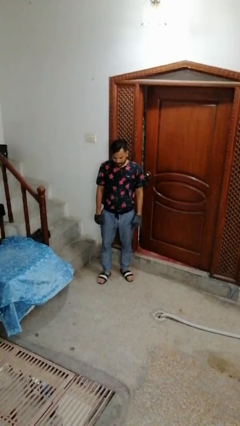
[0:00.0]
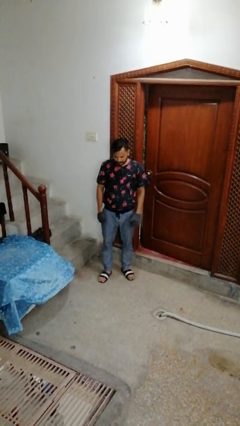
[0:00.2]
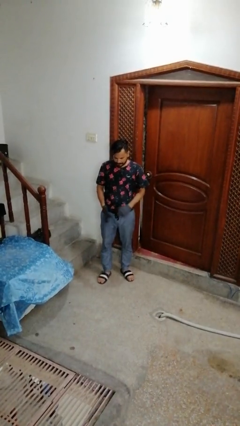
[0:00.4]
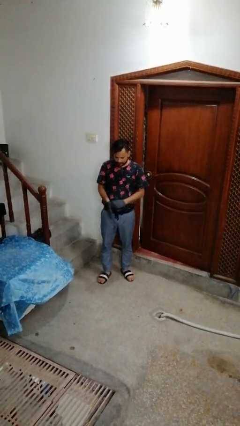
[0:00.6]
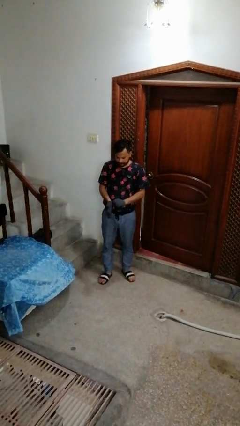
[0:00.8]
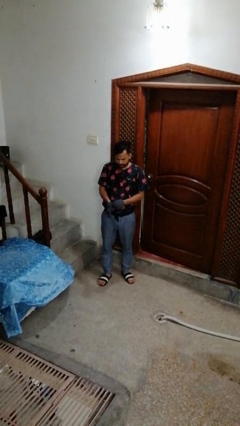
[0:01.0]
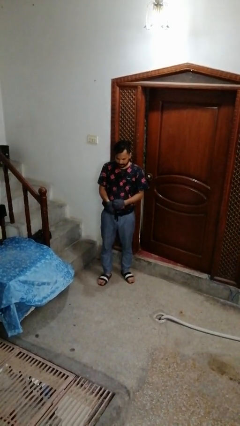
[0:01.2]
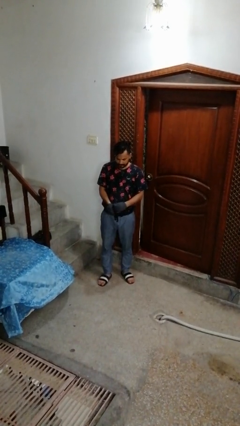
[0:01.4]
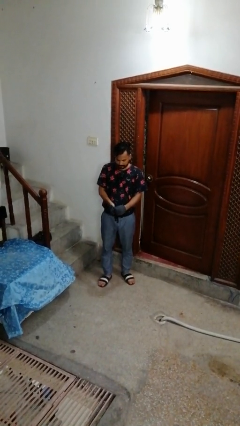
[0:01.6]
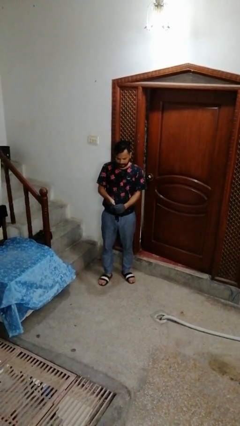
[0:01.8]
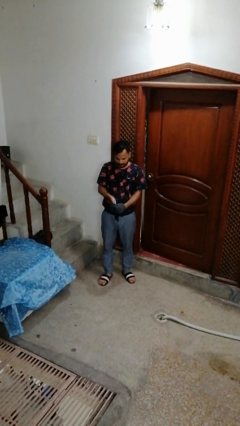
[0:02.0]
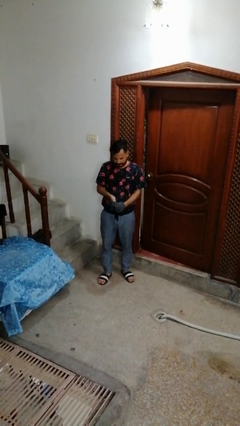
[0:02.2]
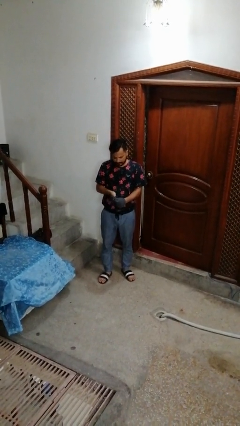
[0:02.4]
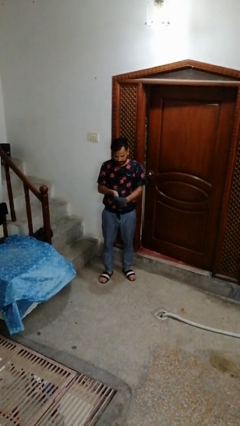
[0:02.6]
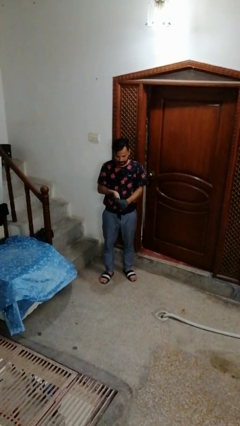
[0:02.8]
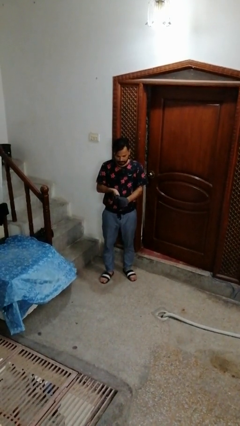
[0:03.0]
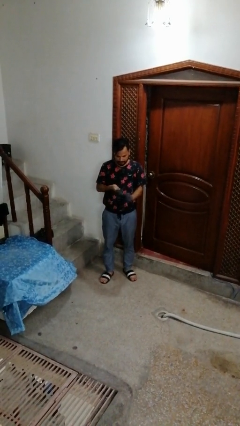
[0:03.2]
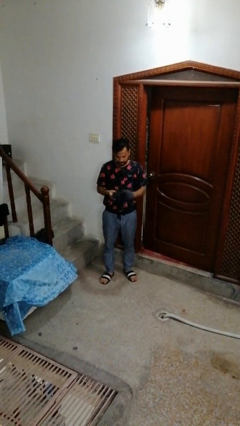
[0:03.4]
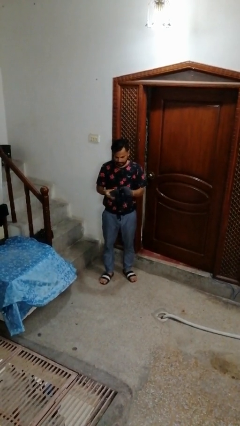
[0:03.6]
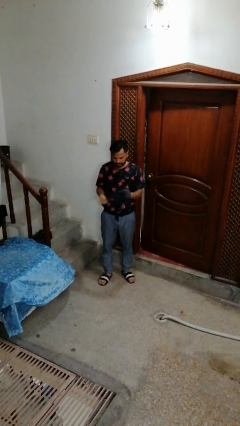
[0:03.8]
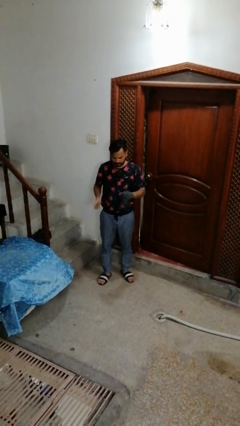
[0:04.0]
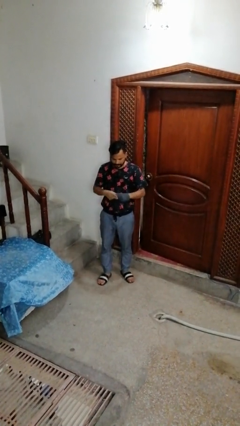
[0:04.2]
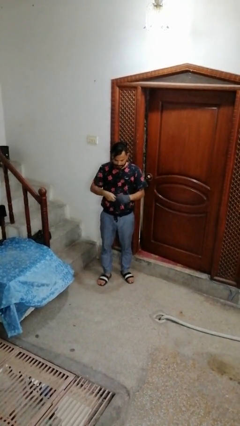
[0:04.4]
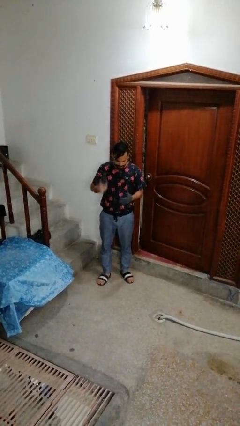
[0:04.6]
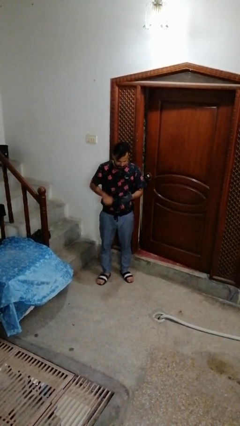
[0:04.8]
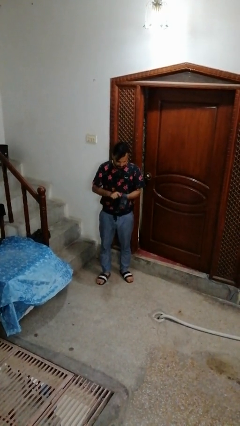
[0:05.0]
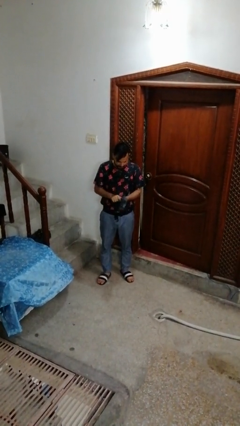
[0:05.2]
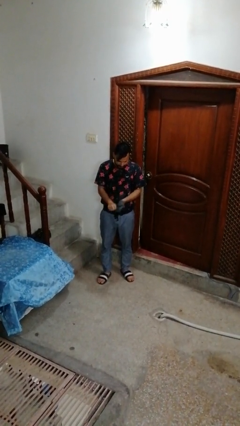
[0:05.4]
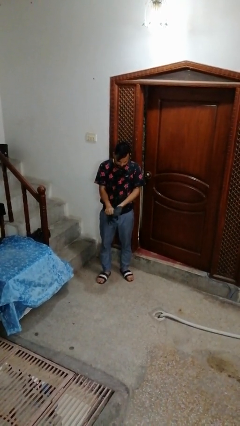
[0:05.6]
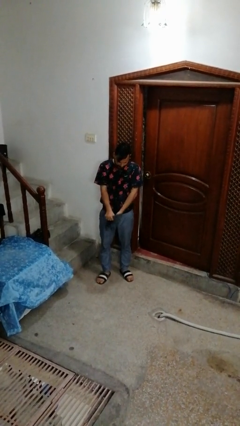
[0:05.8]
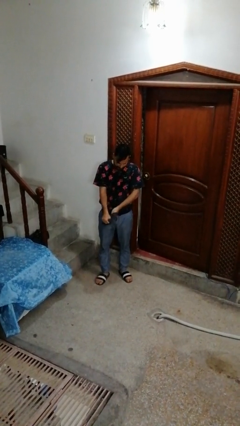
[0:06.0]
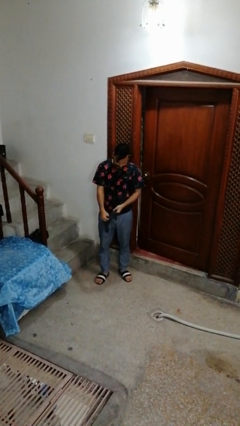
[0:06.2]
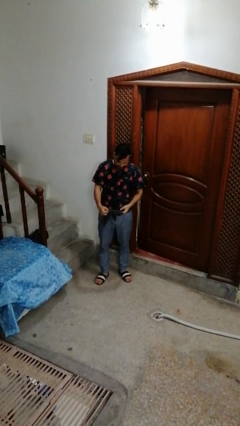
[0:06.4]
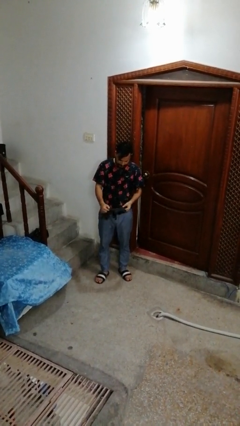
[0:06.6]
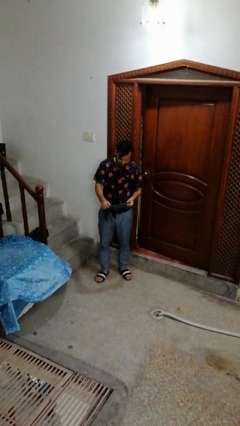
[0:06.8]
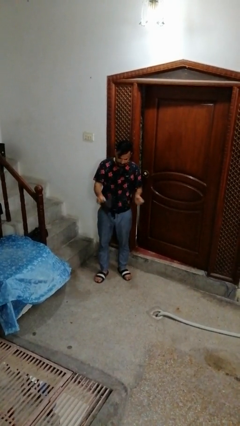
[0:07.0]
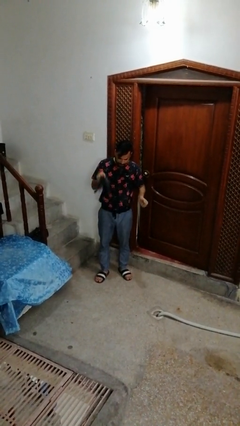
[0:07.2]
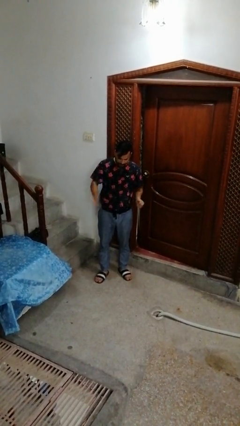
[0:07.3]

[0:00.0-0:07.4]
person takes off gloves

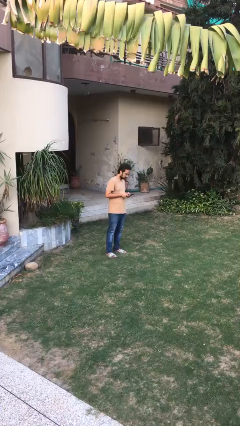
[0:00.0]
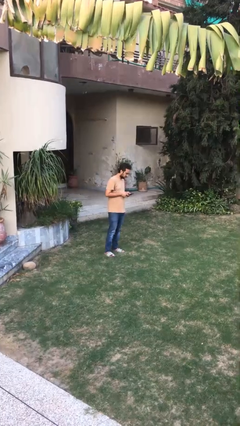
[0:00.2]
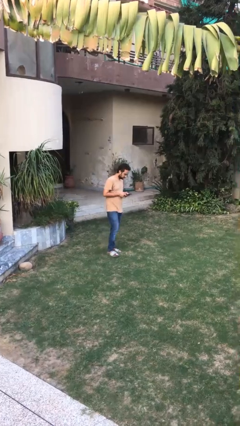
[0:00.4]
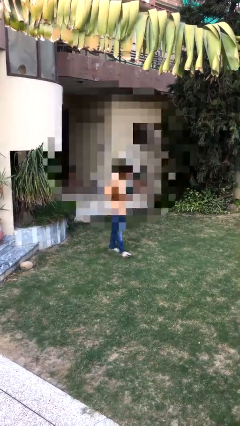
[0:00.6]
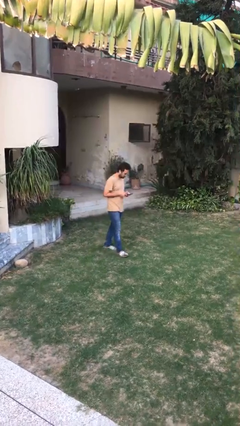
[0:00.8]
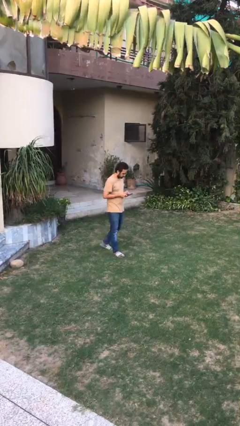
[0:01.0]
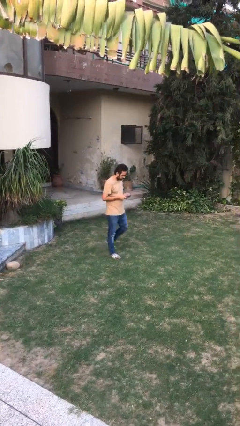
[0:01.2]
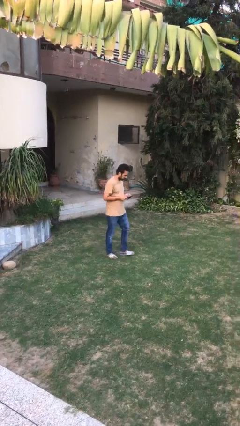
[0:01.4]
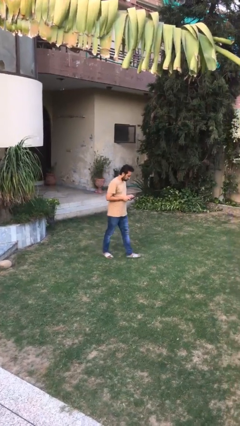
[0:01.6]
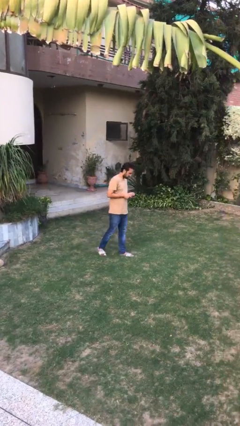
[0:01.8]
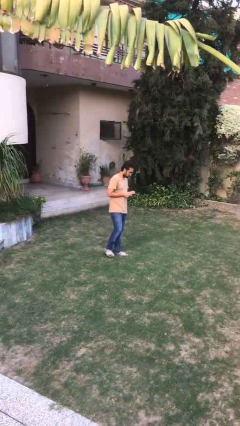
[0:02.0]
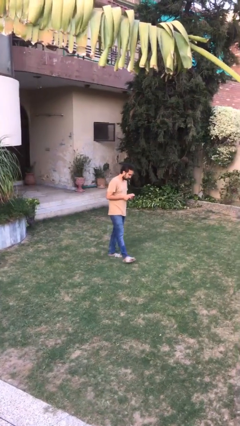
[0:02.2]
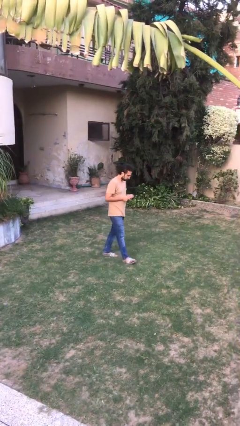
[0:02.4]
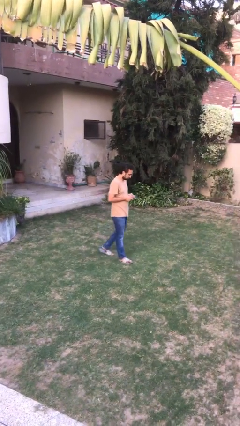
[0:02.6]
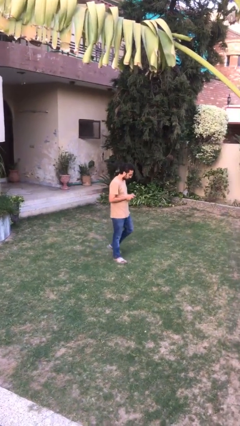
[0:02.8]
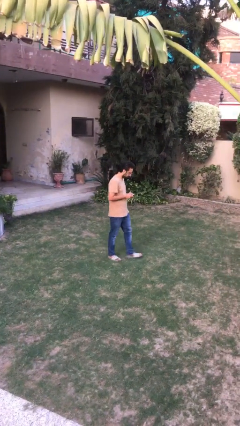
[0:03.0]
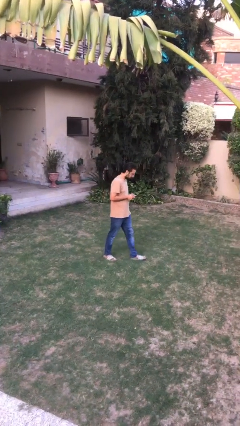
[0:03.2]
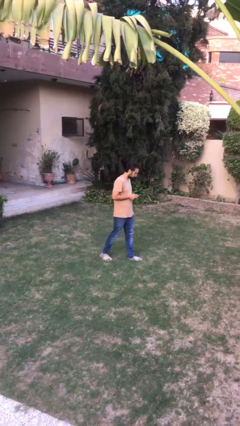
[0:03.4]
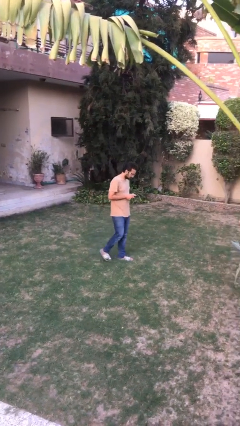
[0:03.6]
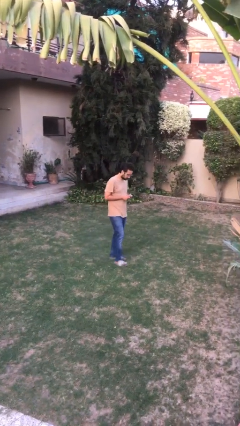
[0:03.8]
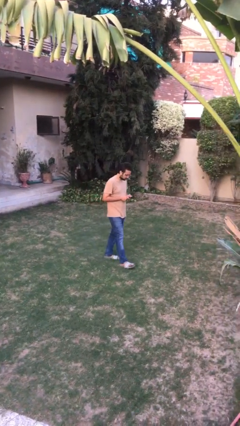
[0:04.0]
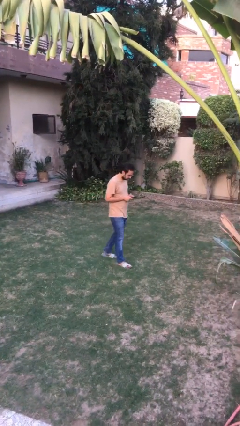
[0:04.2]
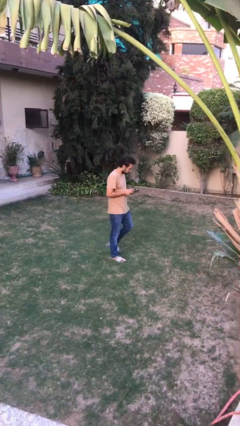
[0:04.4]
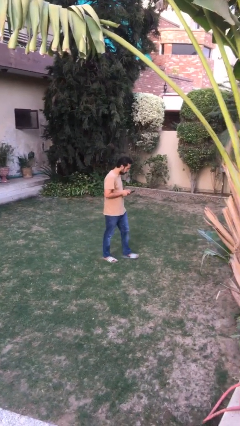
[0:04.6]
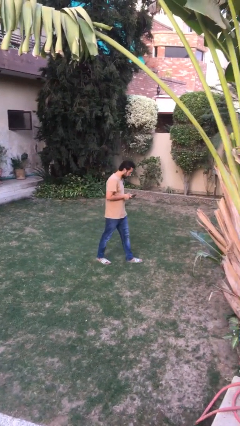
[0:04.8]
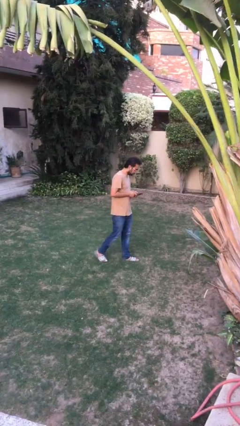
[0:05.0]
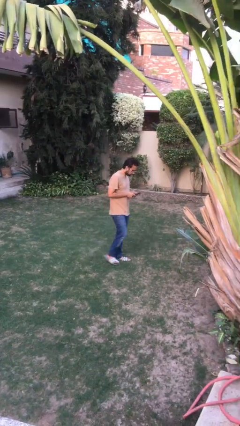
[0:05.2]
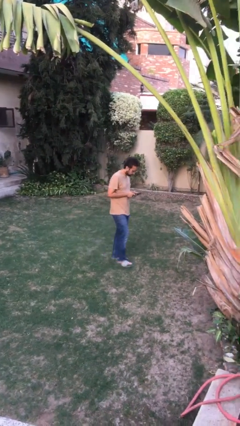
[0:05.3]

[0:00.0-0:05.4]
person texts on phone

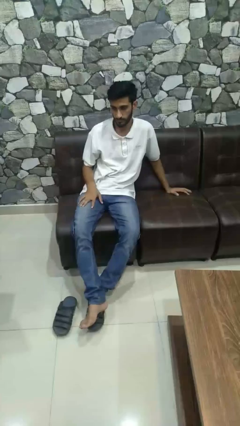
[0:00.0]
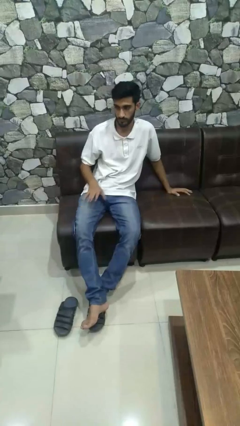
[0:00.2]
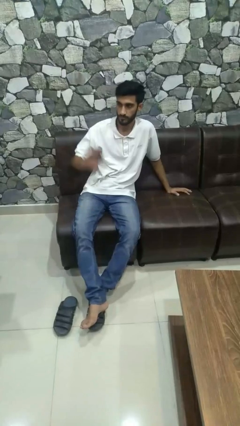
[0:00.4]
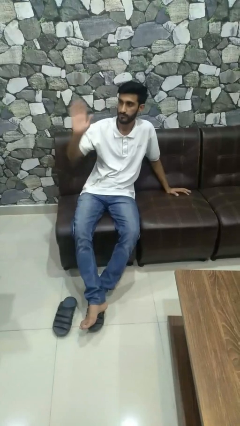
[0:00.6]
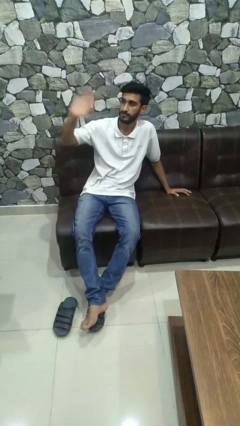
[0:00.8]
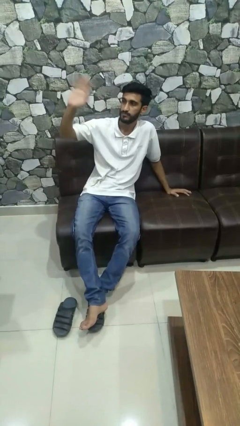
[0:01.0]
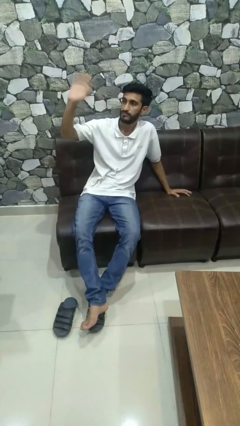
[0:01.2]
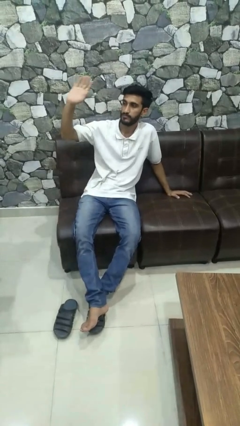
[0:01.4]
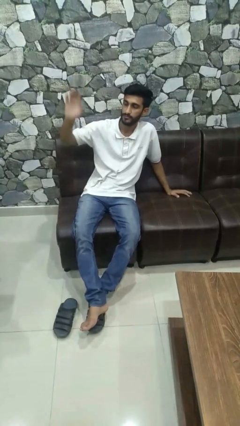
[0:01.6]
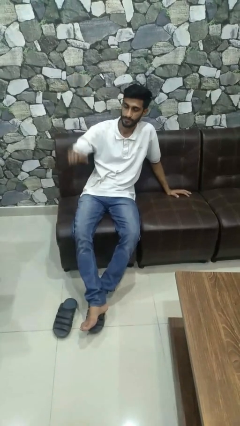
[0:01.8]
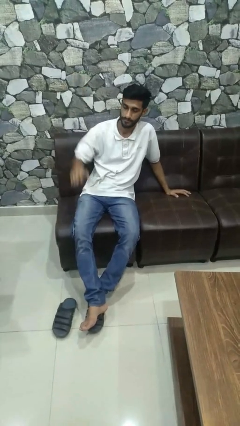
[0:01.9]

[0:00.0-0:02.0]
person waves at person

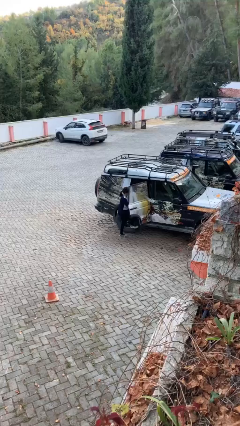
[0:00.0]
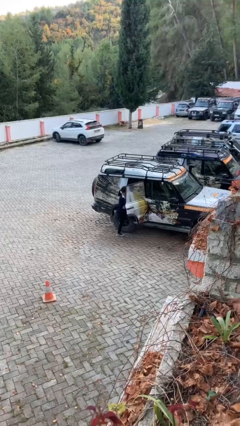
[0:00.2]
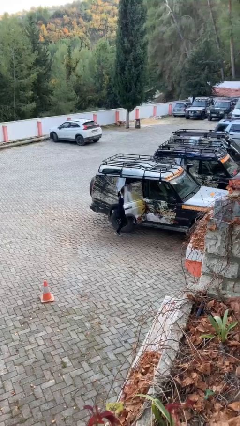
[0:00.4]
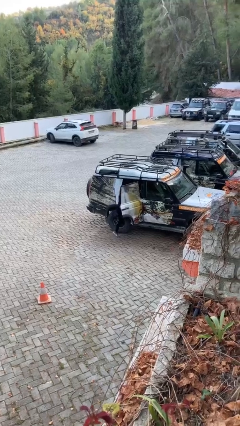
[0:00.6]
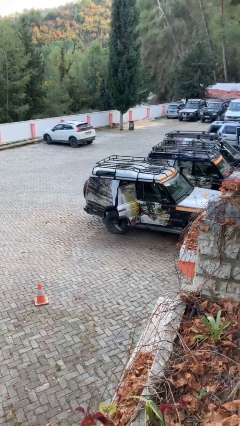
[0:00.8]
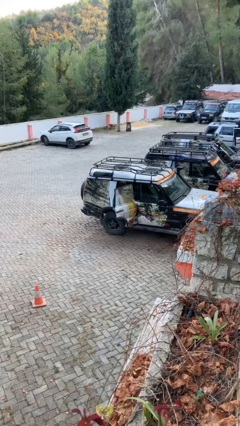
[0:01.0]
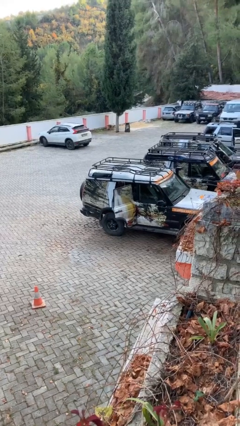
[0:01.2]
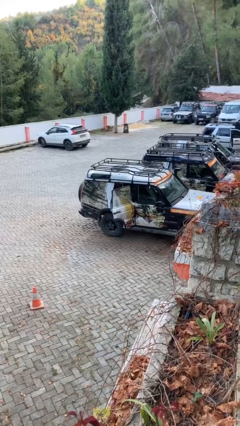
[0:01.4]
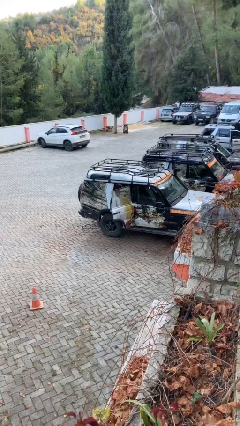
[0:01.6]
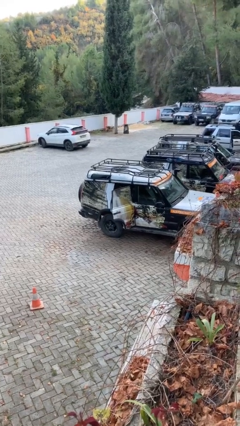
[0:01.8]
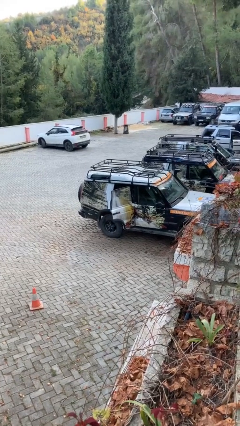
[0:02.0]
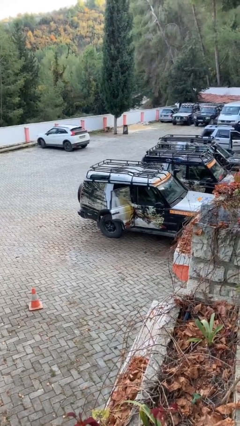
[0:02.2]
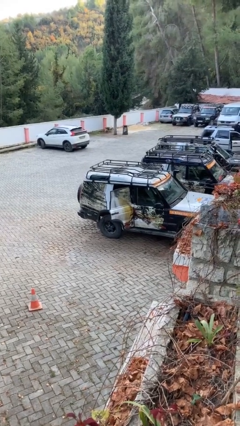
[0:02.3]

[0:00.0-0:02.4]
person enters car

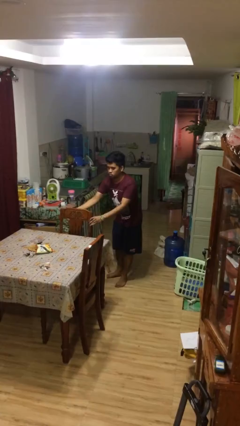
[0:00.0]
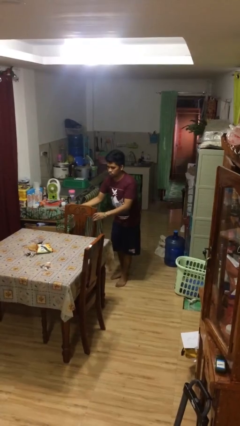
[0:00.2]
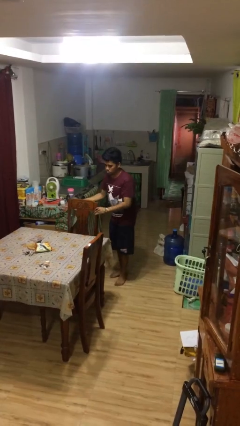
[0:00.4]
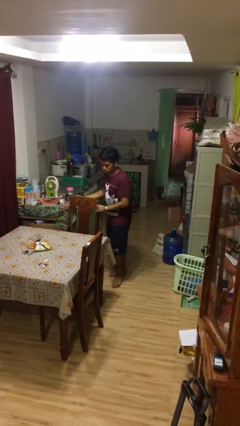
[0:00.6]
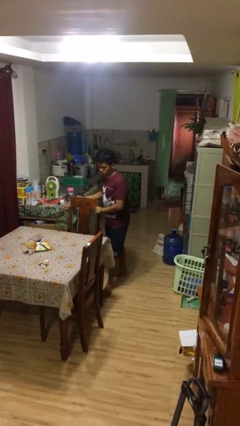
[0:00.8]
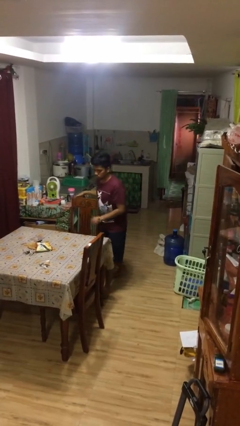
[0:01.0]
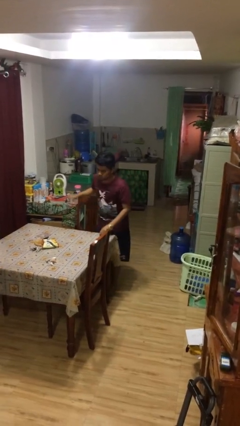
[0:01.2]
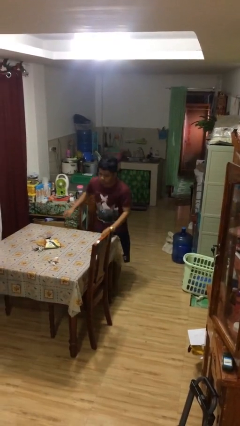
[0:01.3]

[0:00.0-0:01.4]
person stands up
